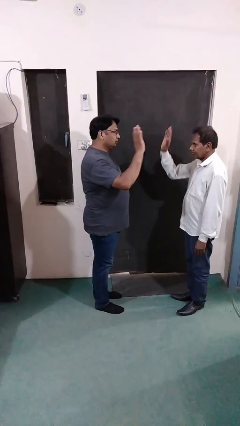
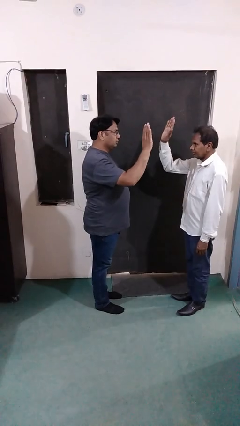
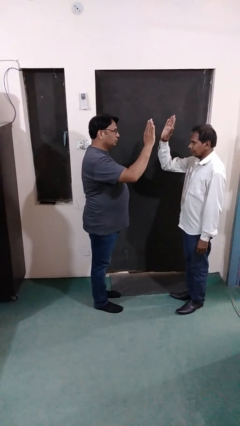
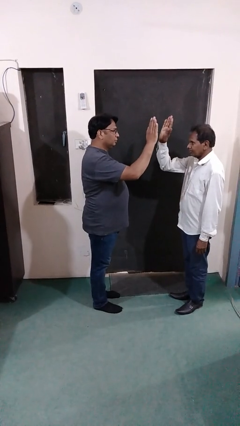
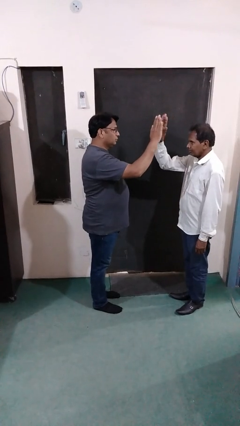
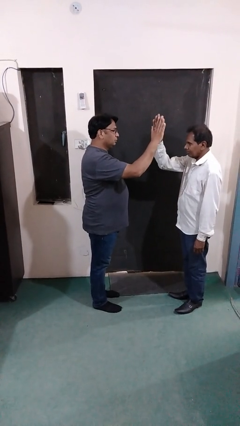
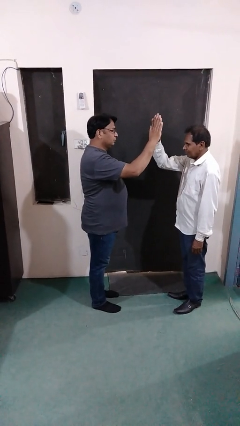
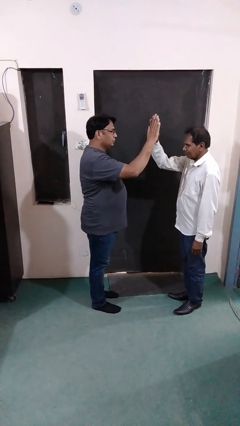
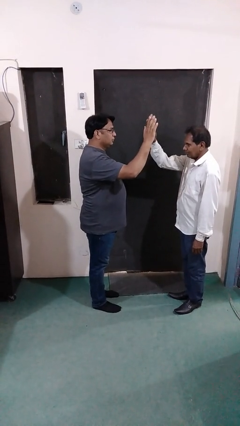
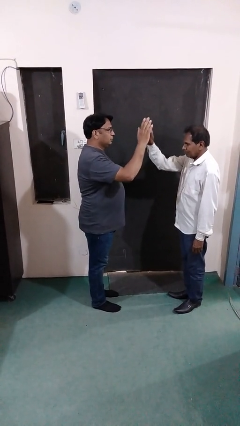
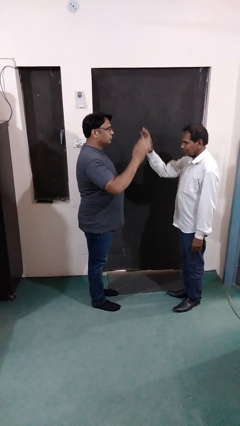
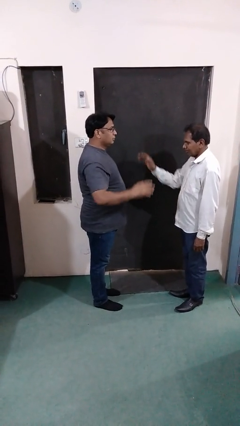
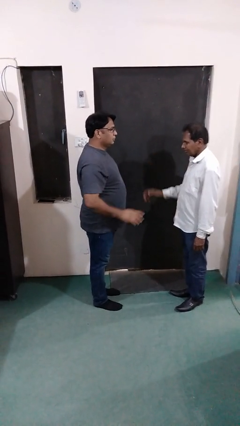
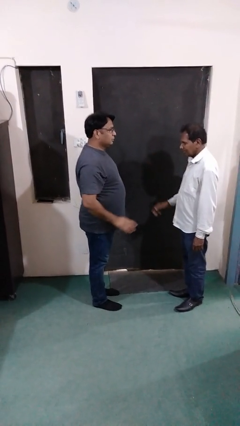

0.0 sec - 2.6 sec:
person highfives hand

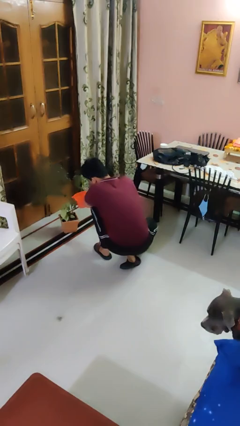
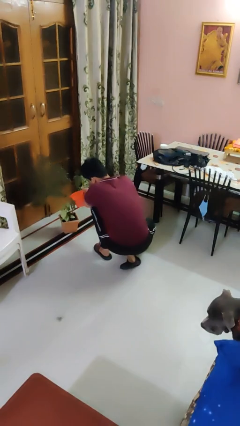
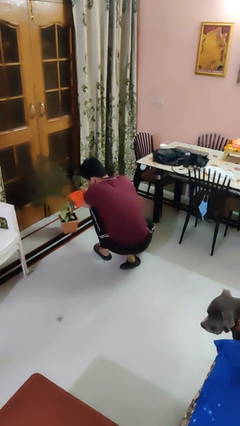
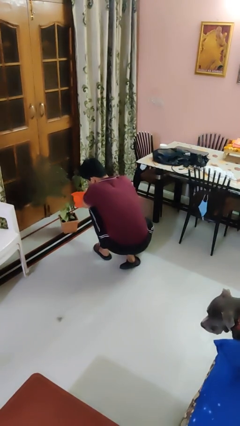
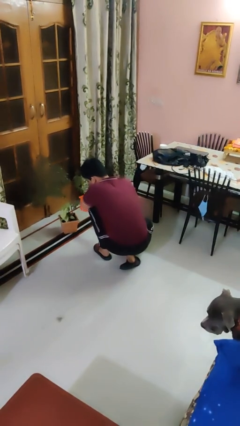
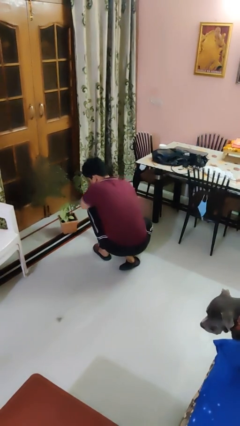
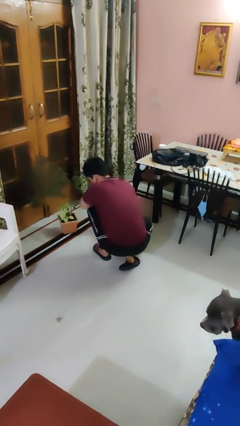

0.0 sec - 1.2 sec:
person waters houseplant

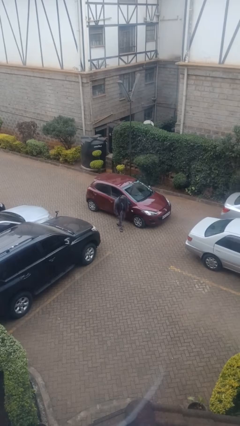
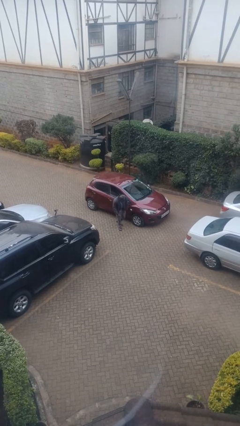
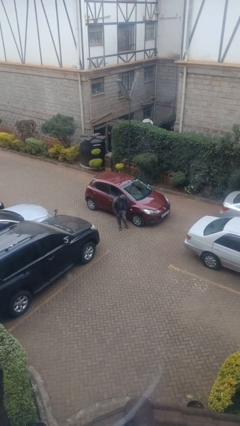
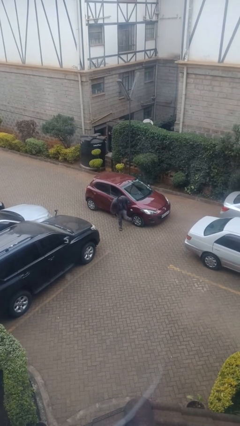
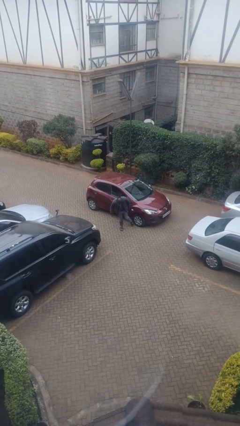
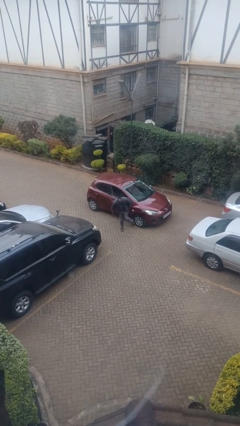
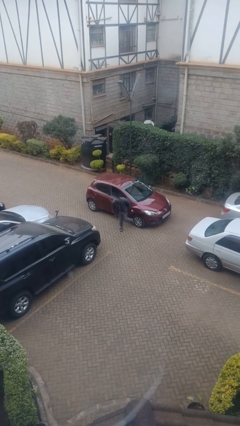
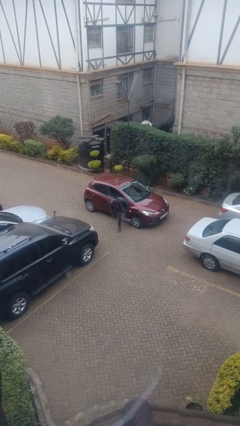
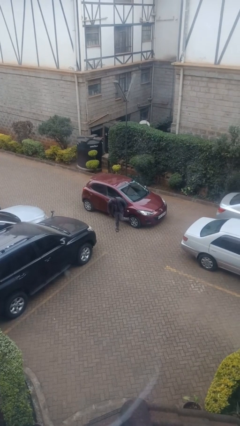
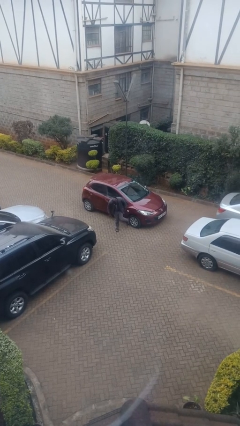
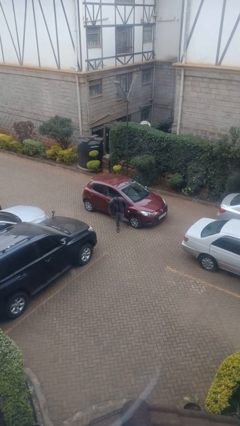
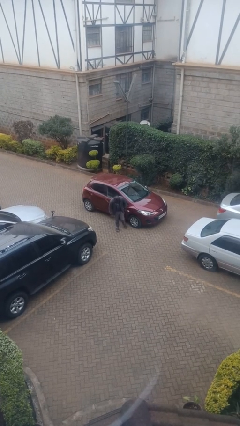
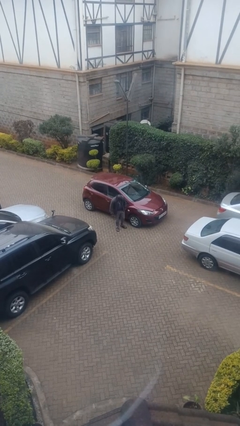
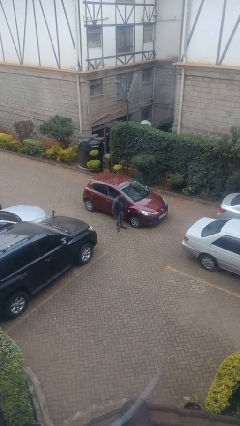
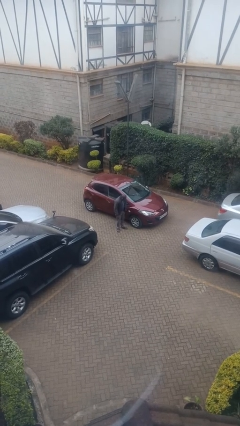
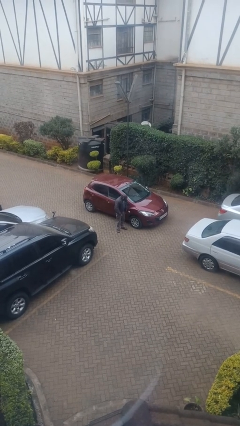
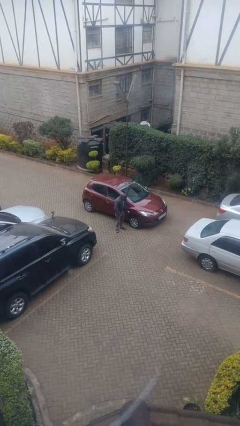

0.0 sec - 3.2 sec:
person kicks car tires

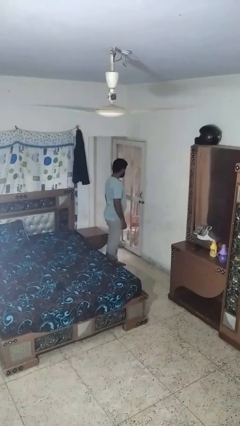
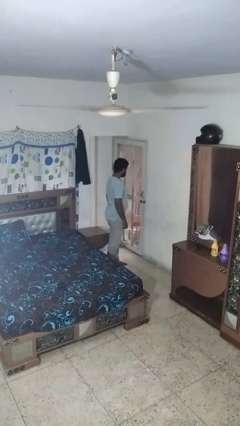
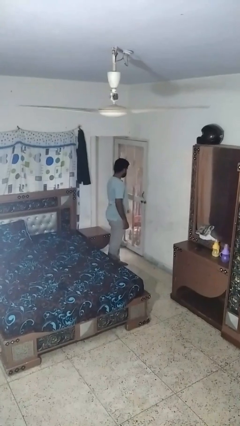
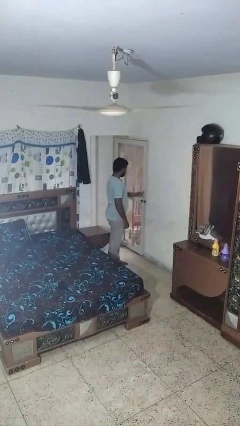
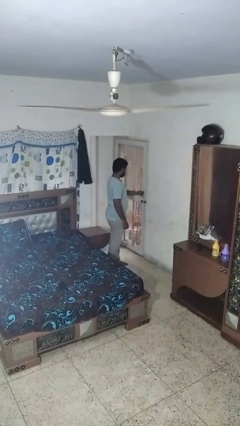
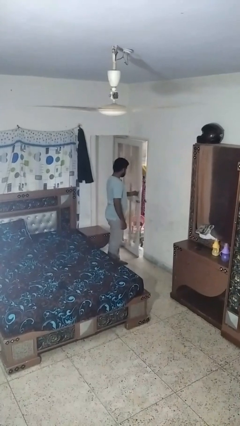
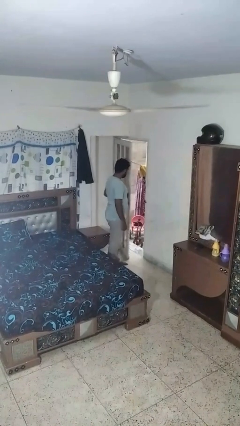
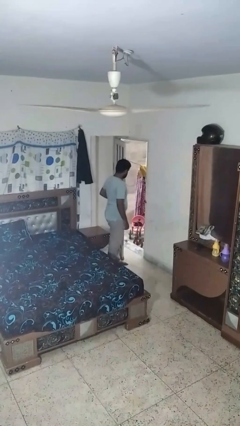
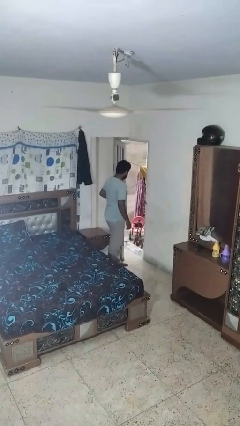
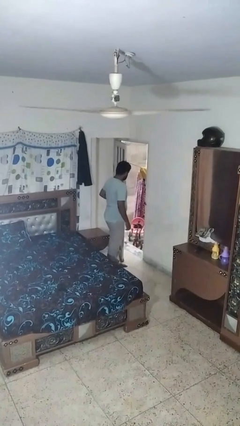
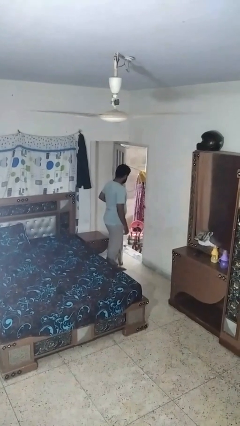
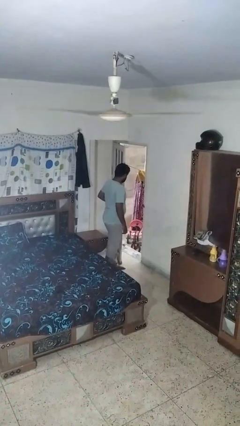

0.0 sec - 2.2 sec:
person opens facility door

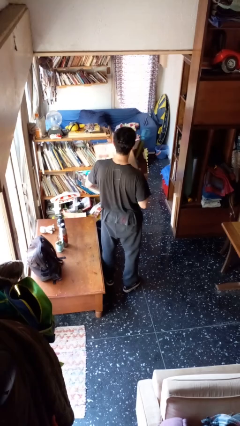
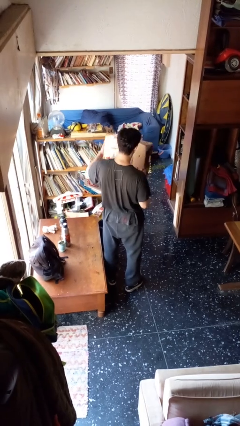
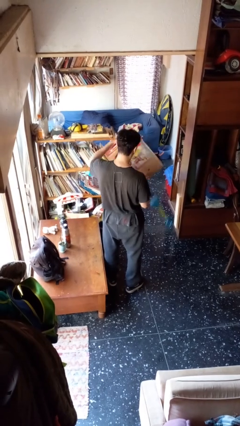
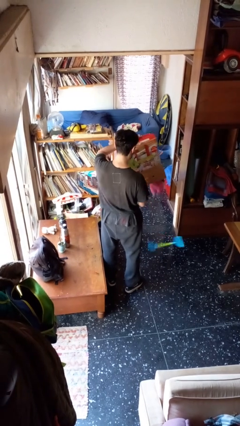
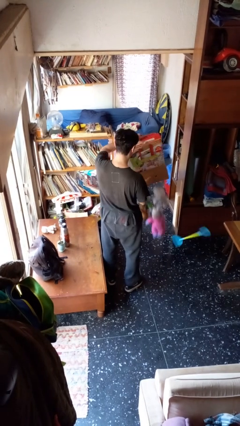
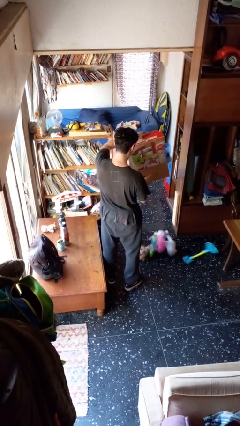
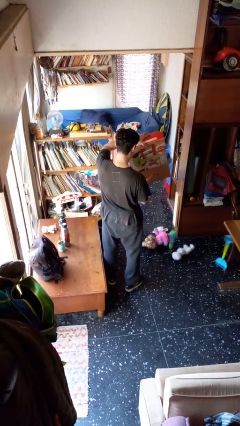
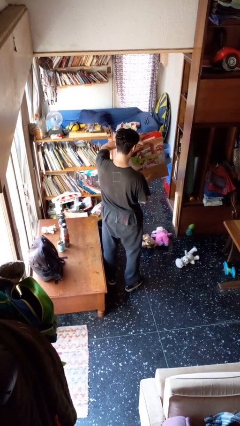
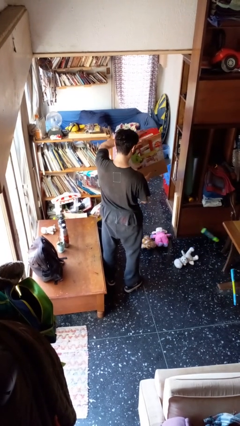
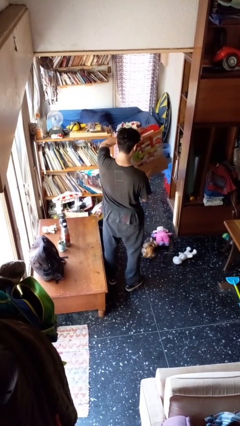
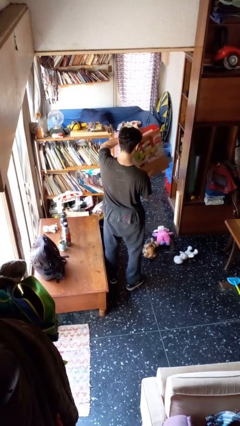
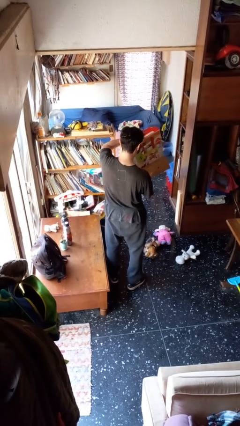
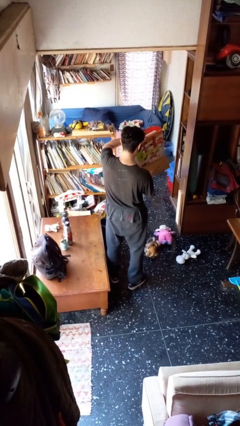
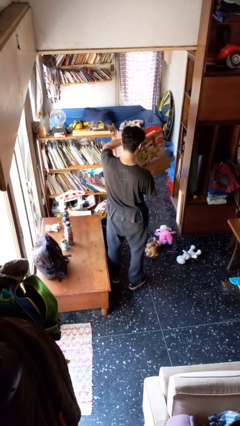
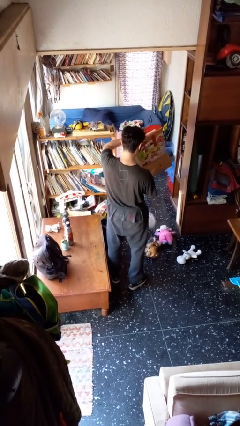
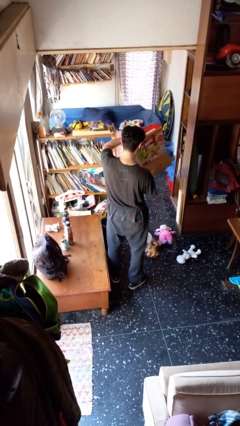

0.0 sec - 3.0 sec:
person unloads box onto floor

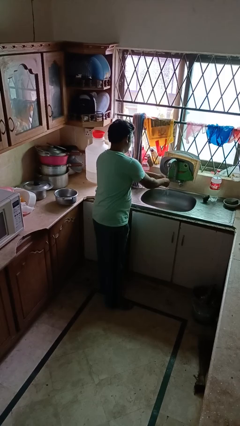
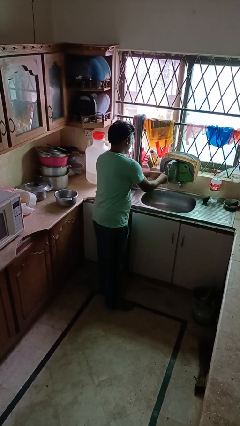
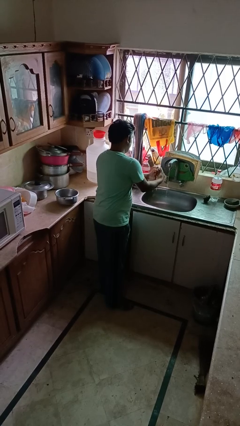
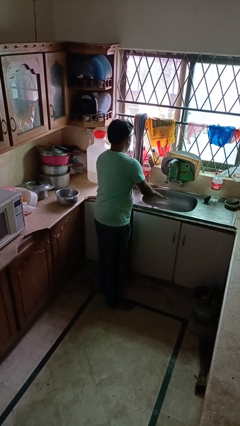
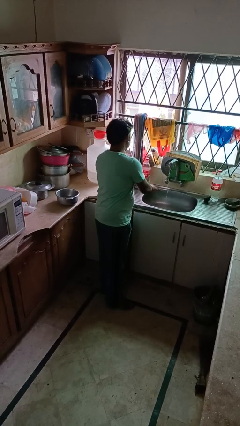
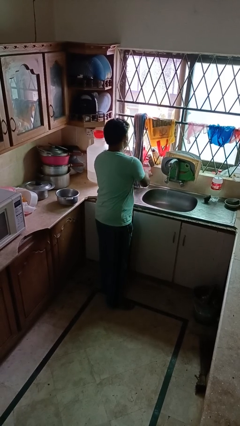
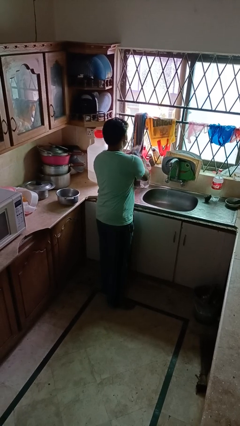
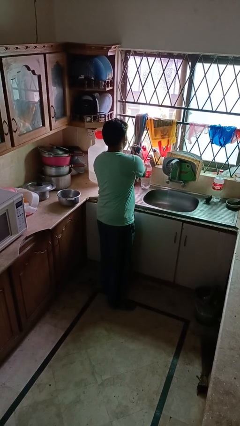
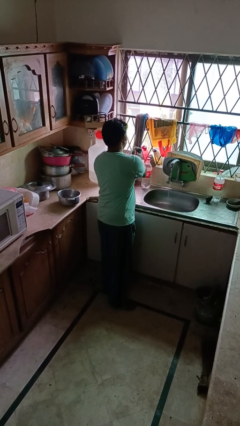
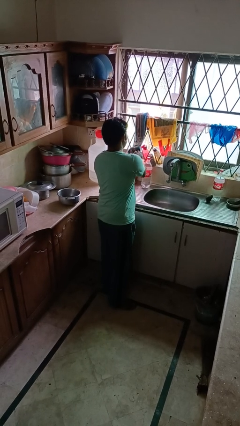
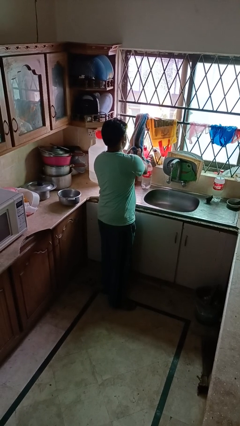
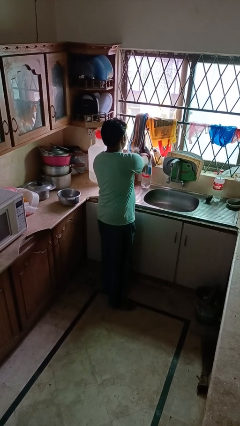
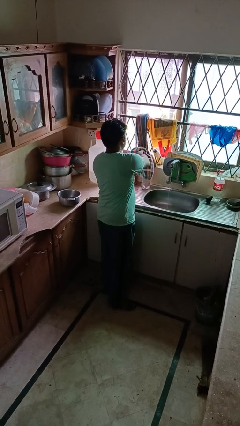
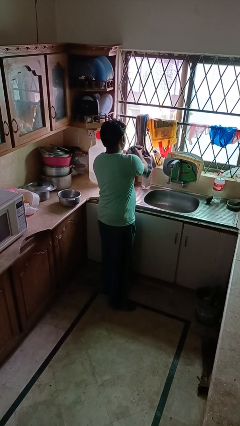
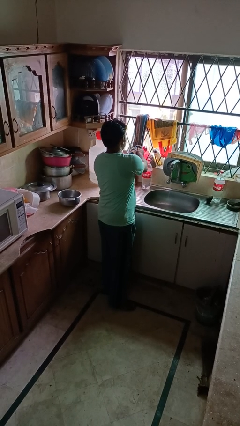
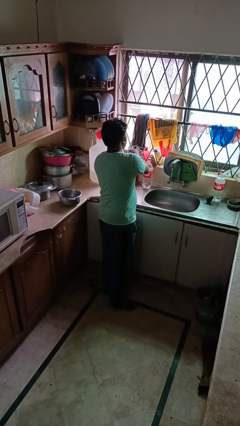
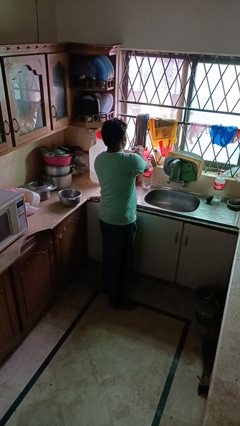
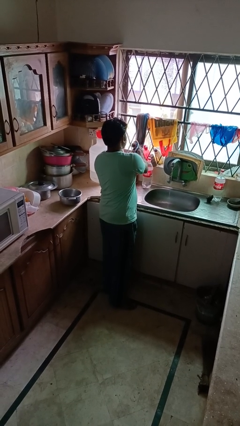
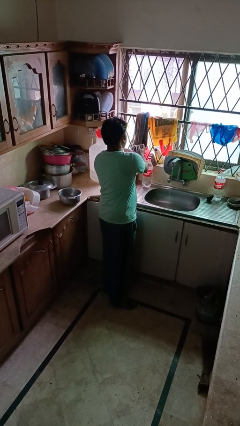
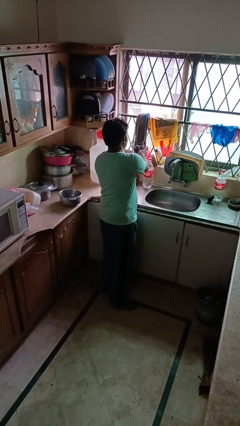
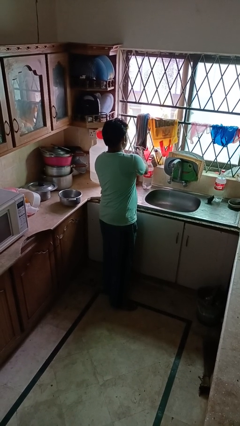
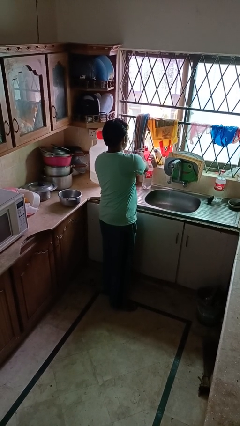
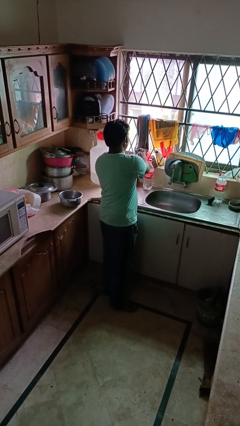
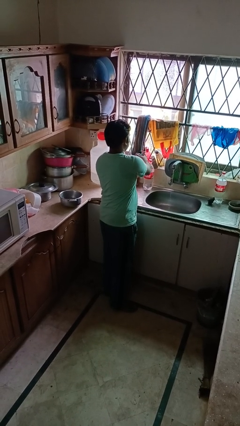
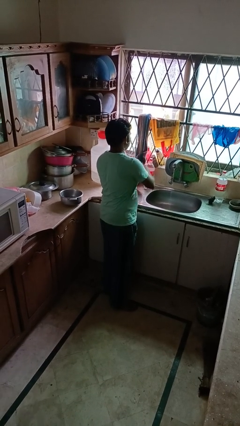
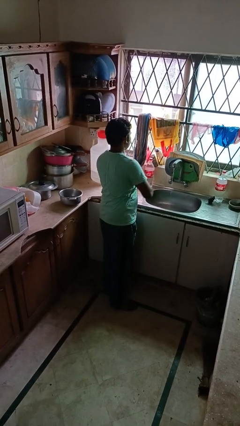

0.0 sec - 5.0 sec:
person dries hands with towel
